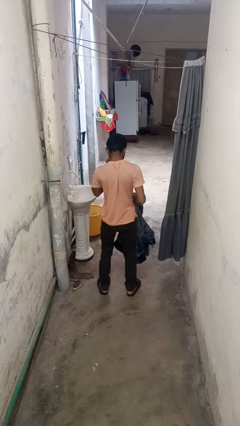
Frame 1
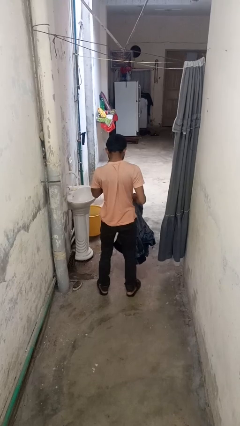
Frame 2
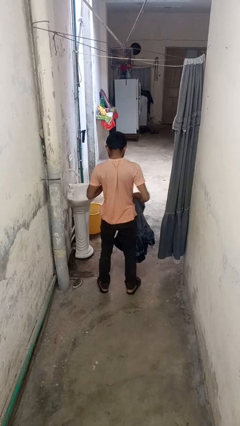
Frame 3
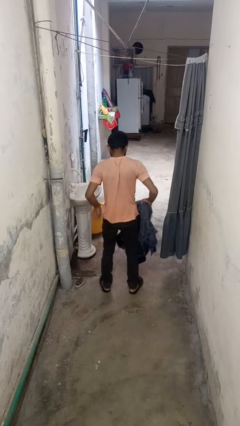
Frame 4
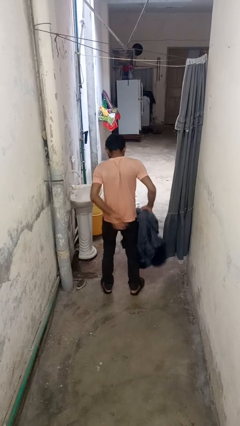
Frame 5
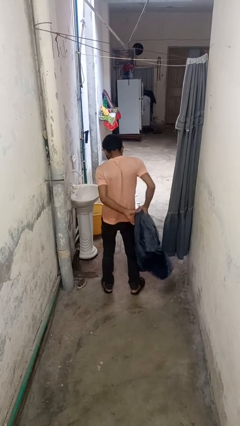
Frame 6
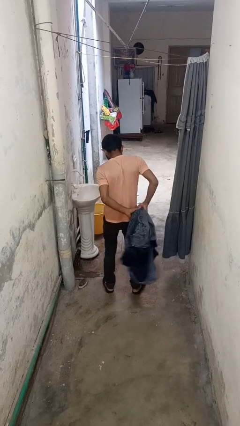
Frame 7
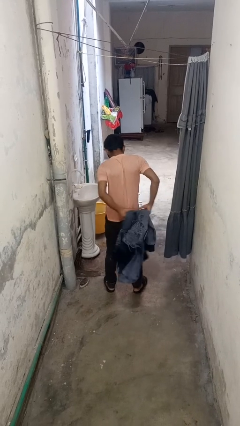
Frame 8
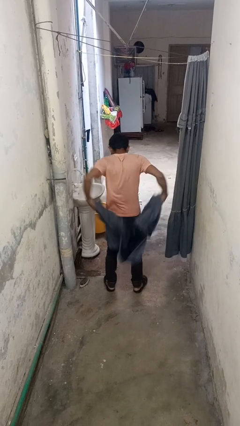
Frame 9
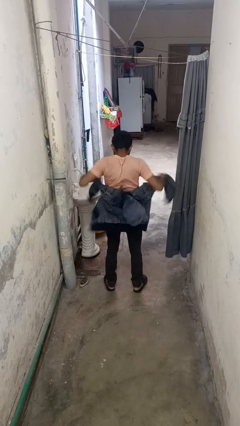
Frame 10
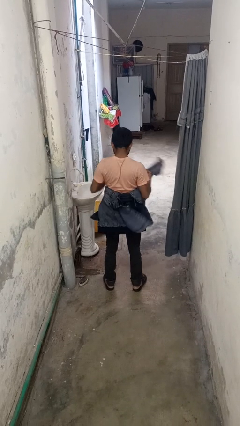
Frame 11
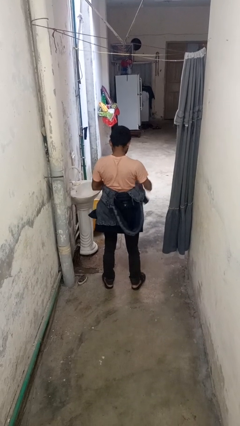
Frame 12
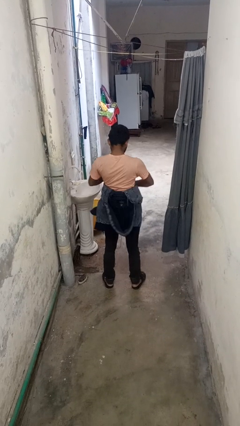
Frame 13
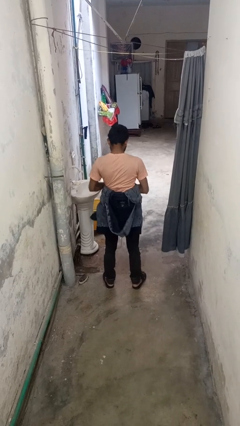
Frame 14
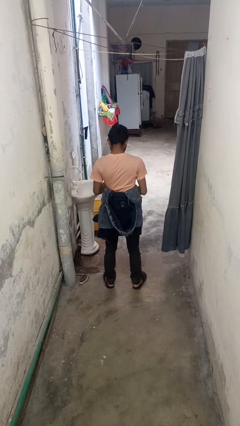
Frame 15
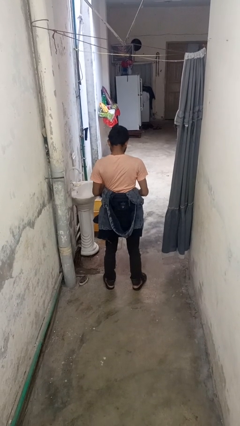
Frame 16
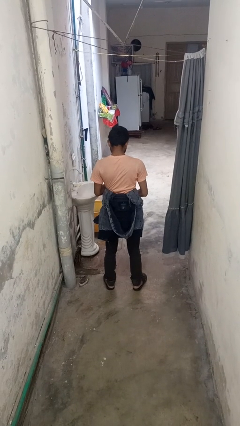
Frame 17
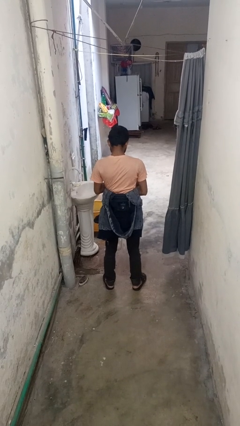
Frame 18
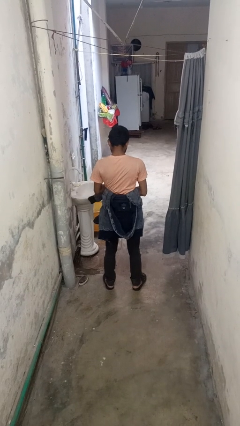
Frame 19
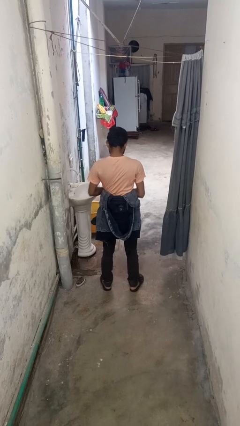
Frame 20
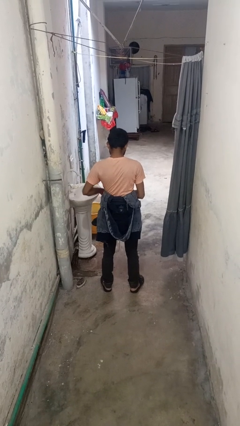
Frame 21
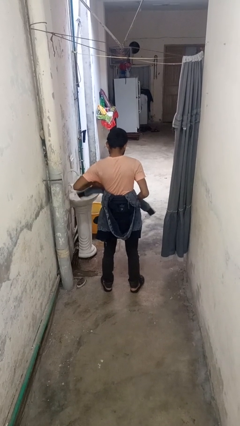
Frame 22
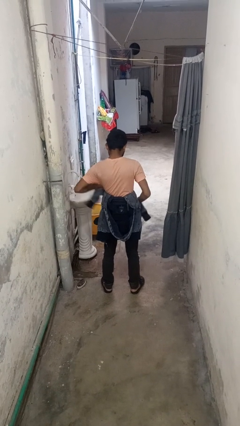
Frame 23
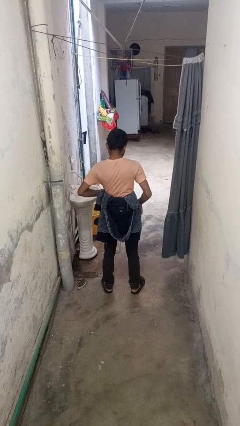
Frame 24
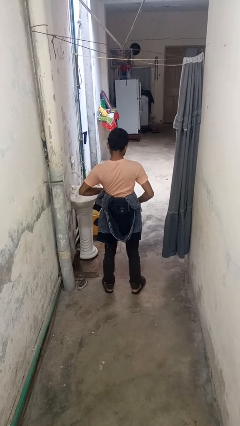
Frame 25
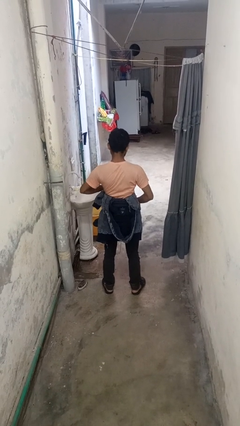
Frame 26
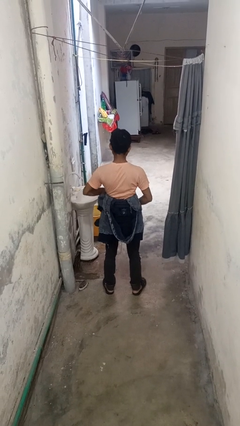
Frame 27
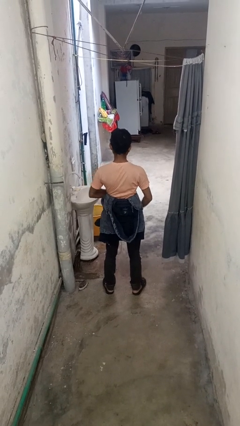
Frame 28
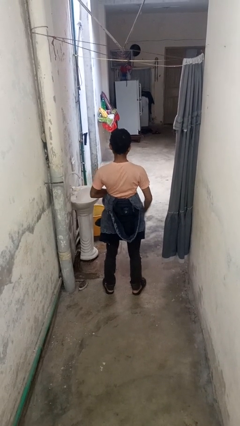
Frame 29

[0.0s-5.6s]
person ties jacket around waist

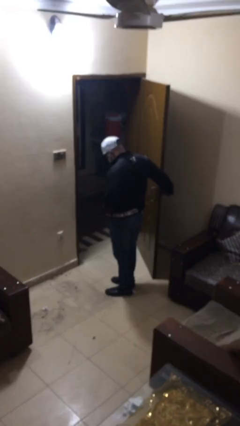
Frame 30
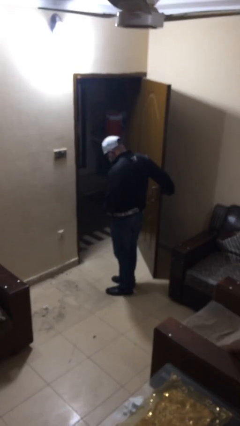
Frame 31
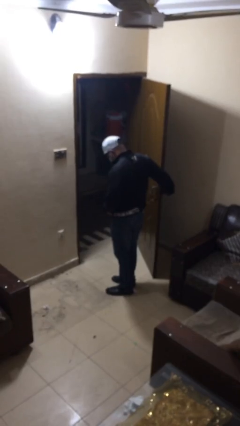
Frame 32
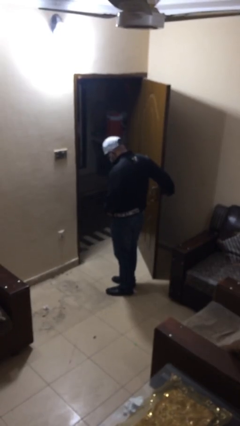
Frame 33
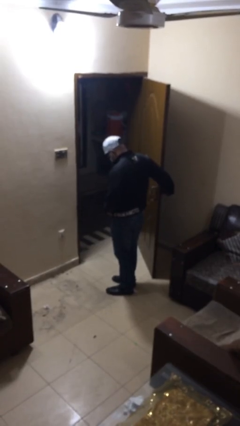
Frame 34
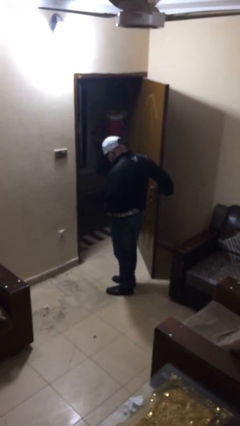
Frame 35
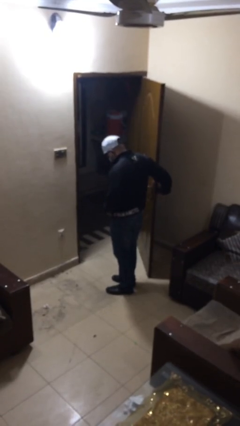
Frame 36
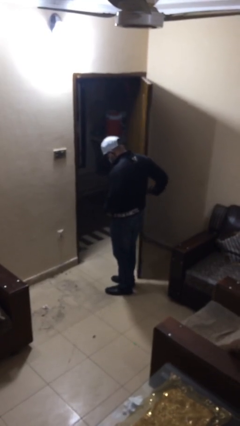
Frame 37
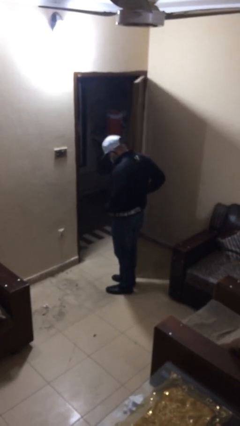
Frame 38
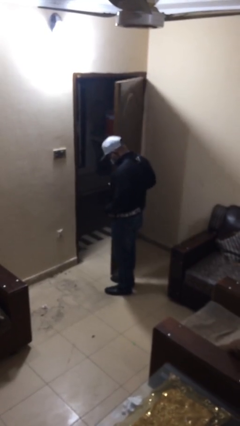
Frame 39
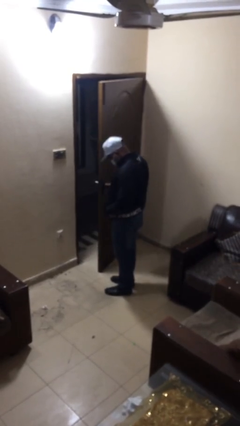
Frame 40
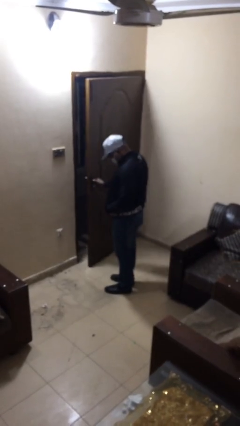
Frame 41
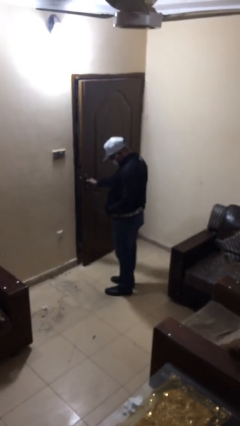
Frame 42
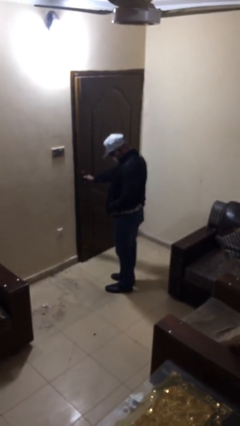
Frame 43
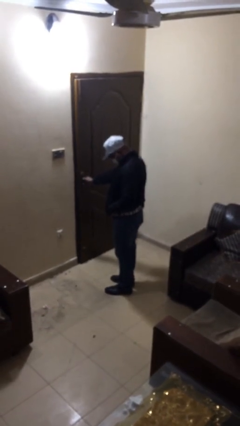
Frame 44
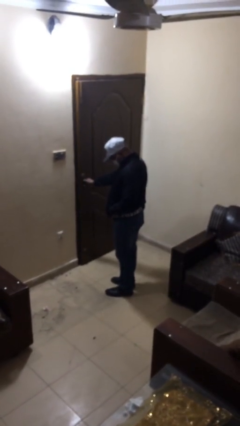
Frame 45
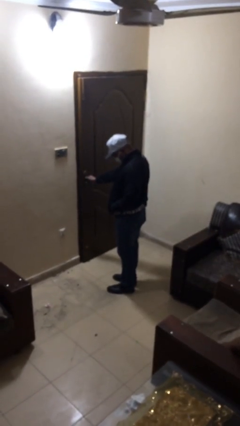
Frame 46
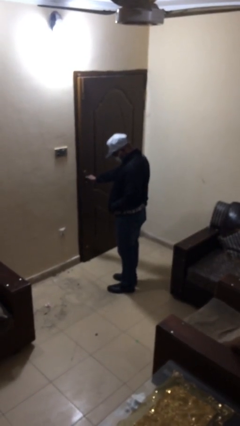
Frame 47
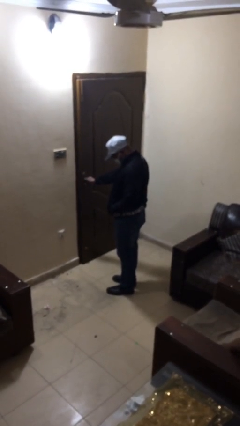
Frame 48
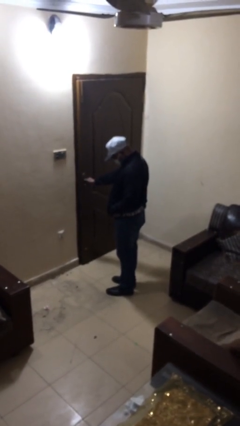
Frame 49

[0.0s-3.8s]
person closes facility door

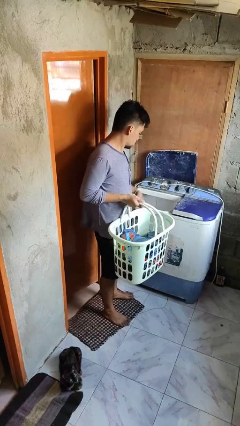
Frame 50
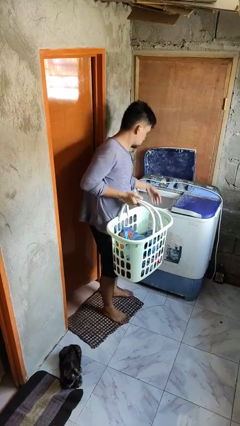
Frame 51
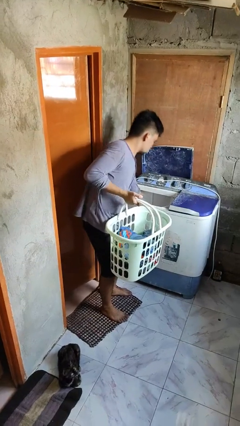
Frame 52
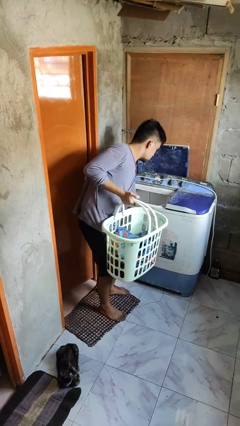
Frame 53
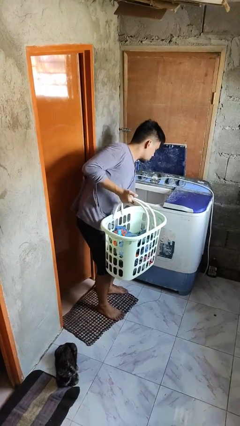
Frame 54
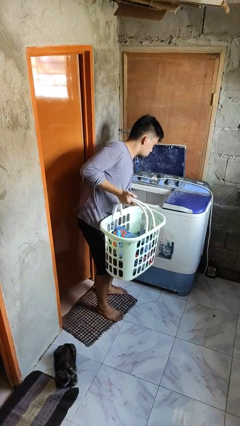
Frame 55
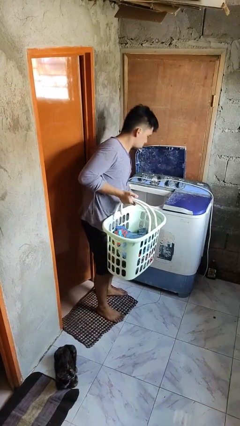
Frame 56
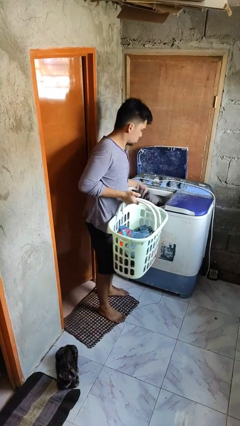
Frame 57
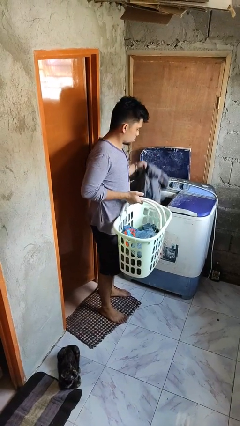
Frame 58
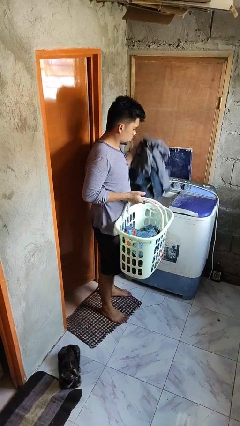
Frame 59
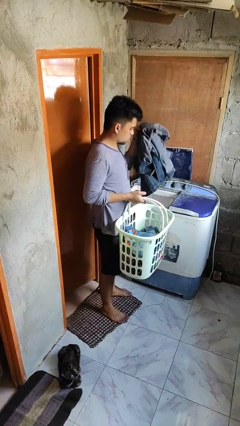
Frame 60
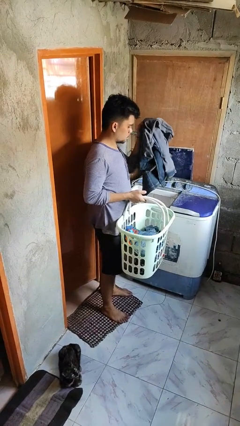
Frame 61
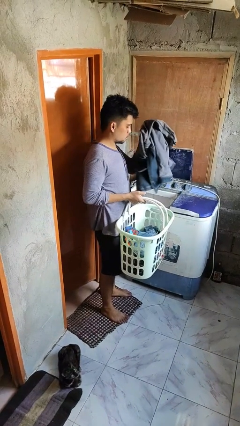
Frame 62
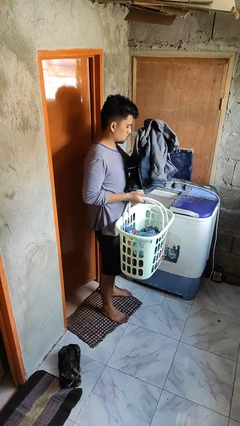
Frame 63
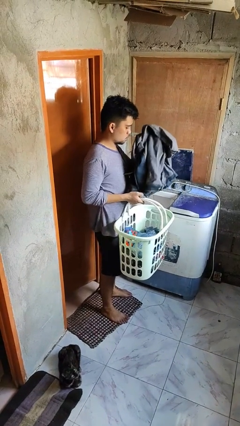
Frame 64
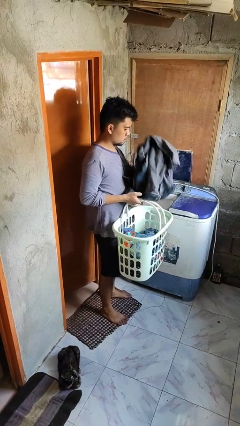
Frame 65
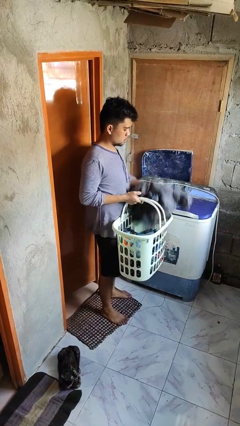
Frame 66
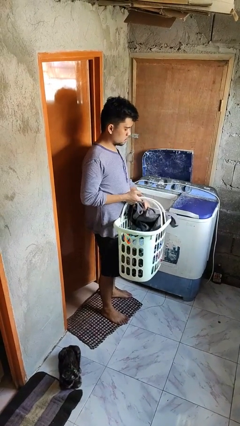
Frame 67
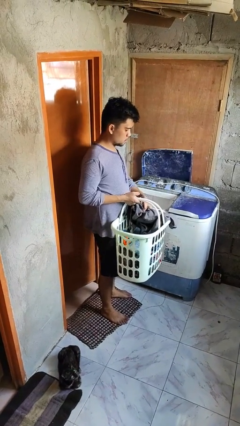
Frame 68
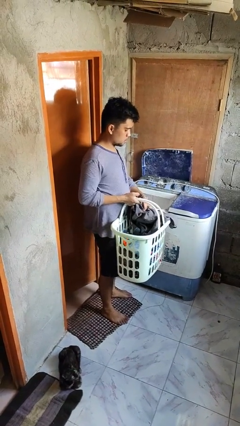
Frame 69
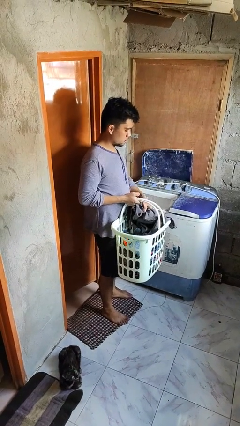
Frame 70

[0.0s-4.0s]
person unloads clotheswasher

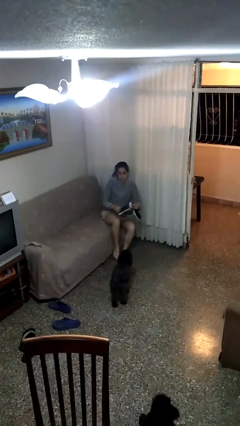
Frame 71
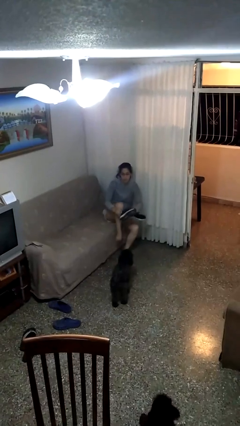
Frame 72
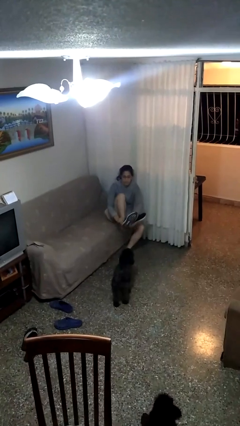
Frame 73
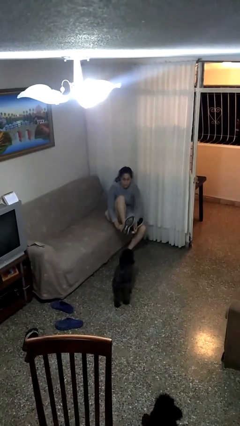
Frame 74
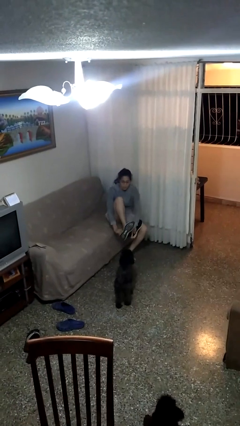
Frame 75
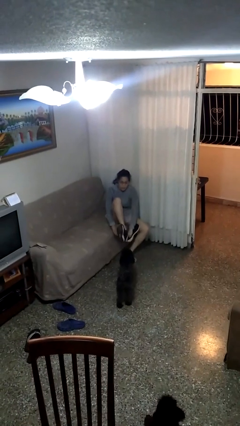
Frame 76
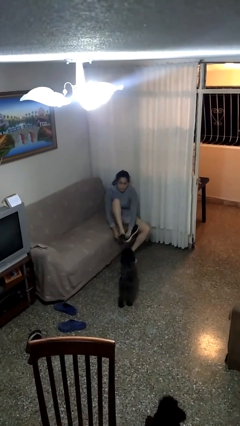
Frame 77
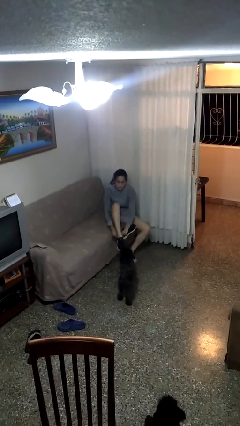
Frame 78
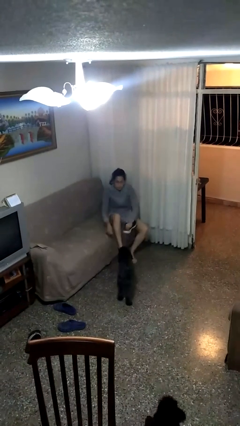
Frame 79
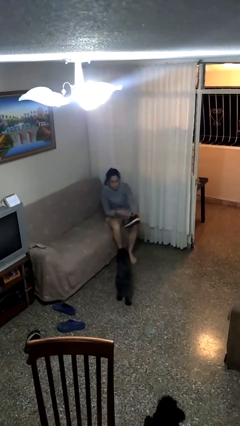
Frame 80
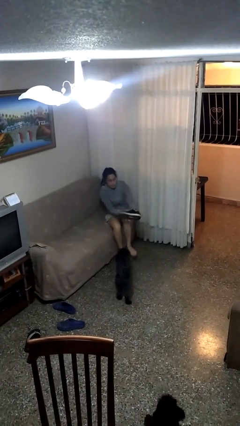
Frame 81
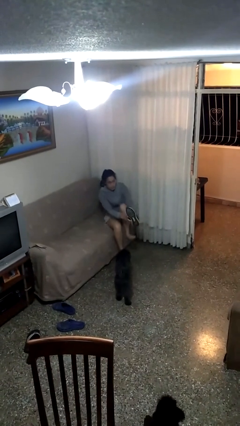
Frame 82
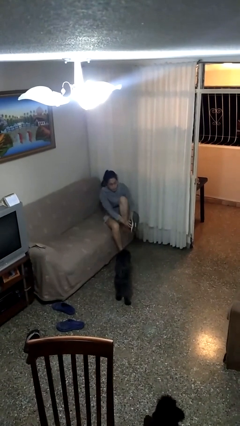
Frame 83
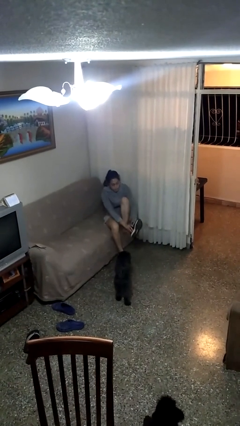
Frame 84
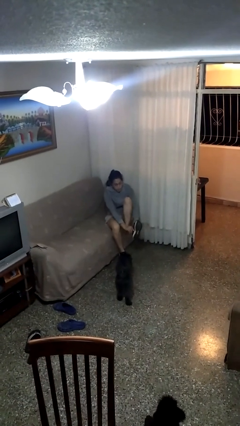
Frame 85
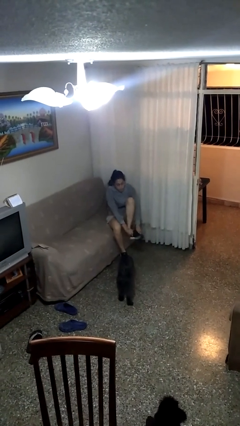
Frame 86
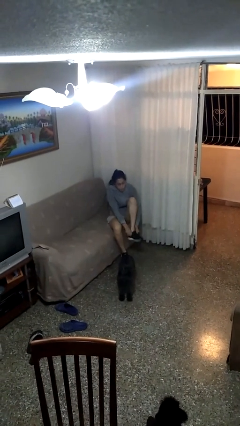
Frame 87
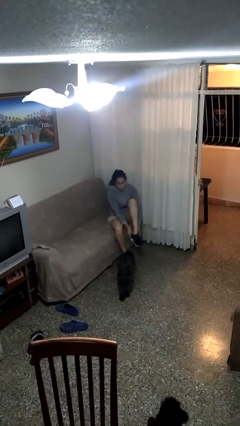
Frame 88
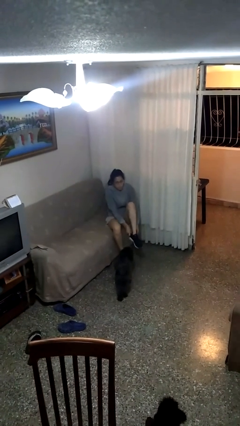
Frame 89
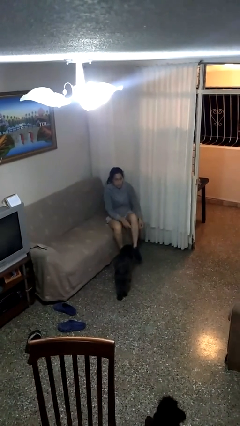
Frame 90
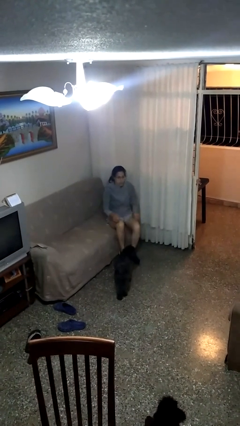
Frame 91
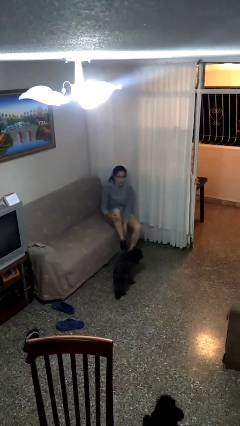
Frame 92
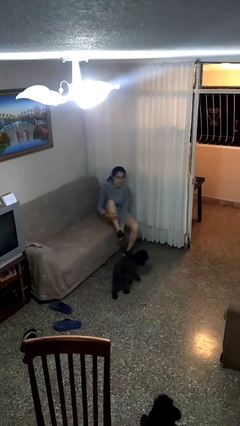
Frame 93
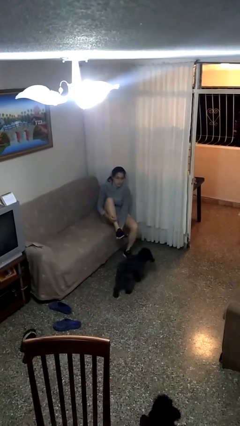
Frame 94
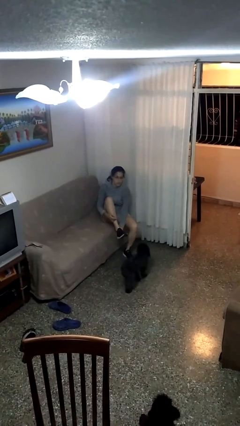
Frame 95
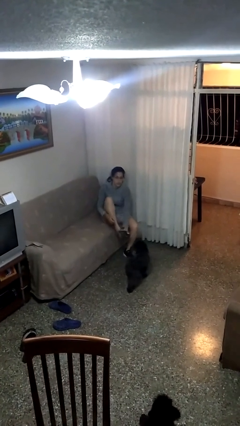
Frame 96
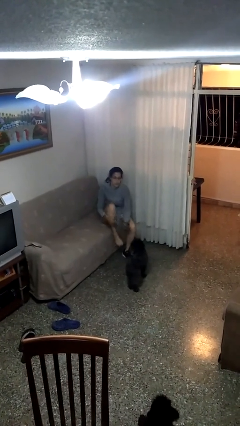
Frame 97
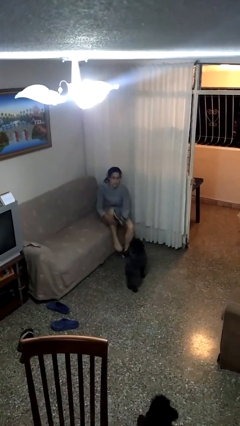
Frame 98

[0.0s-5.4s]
person puts on shoes
